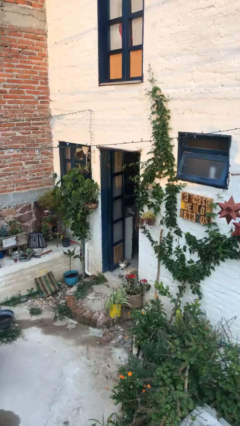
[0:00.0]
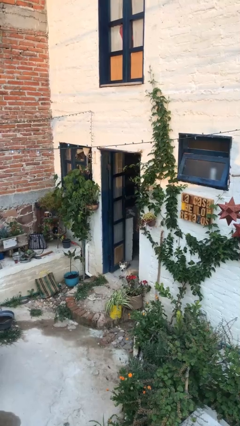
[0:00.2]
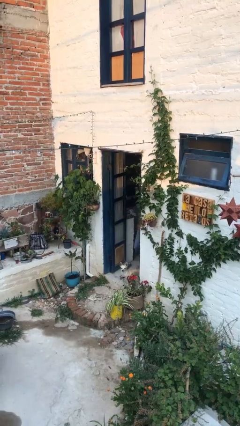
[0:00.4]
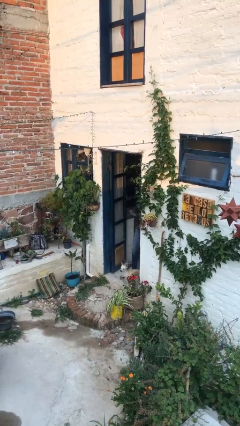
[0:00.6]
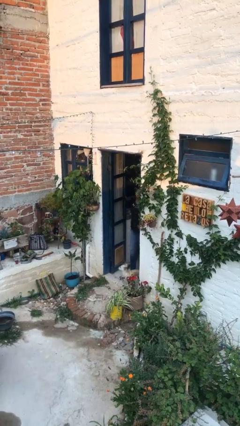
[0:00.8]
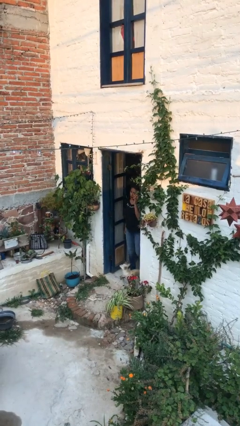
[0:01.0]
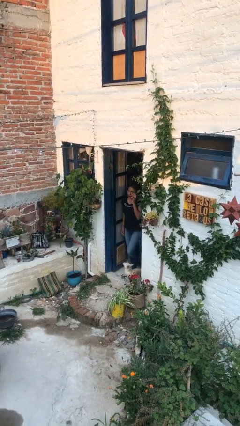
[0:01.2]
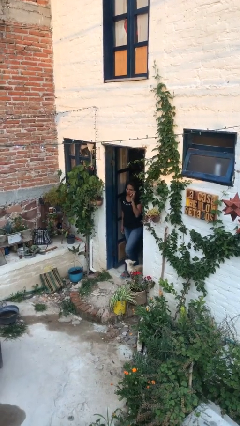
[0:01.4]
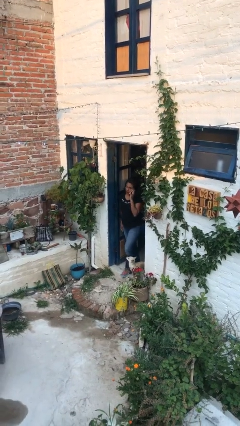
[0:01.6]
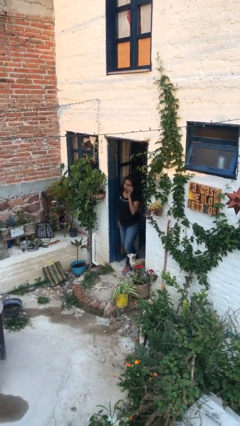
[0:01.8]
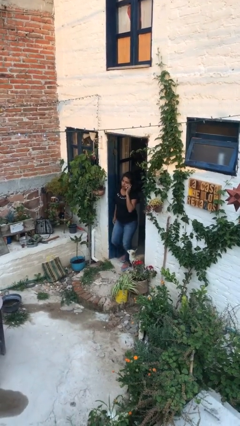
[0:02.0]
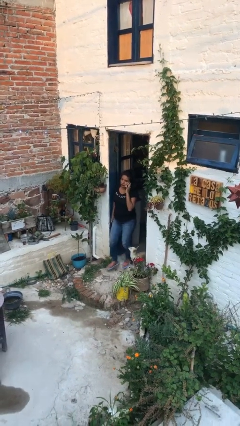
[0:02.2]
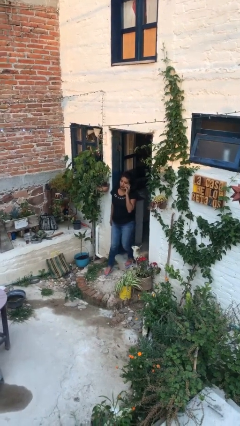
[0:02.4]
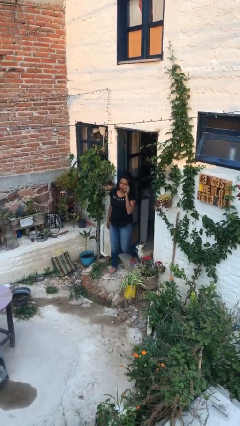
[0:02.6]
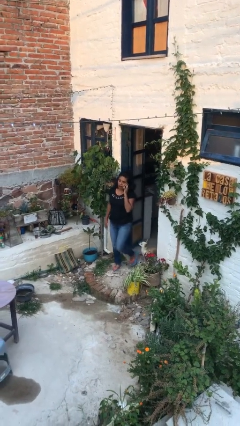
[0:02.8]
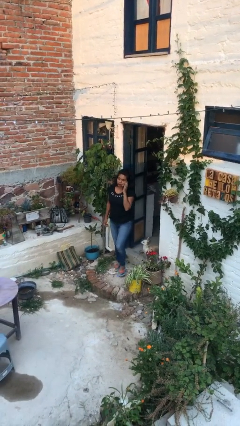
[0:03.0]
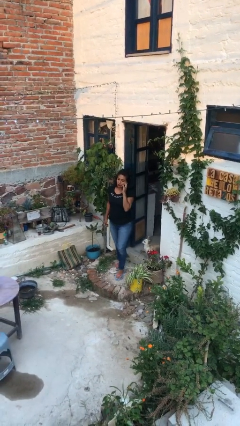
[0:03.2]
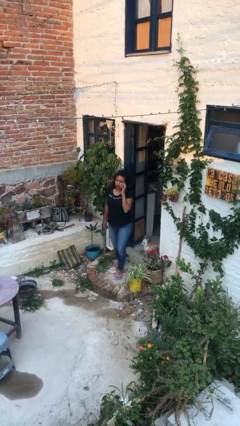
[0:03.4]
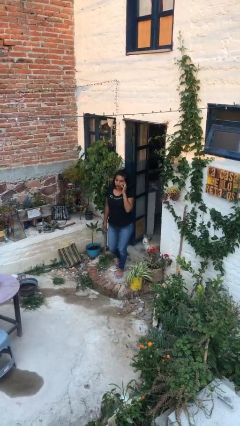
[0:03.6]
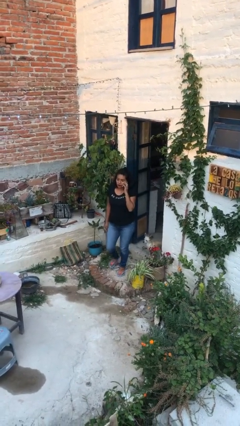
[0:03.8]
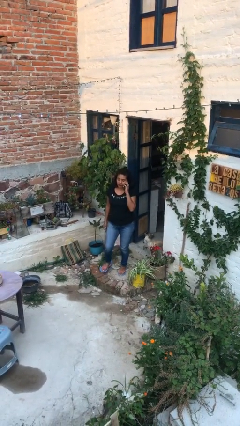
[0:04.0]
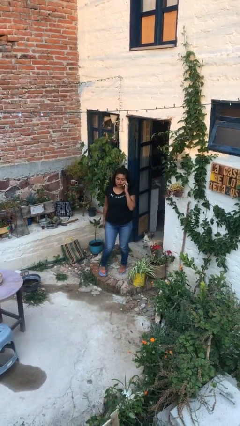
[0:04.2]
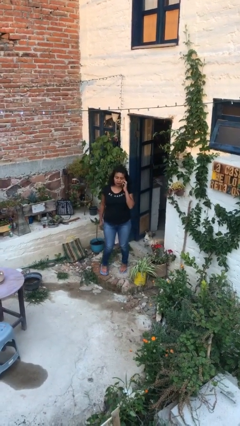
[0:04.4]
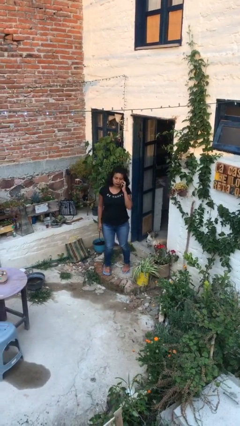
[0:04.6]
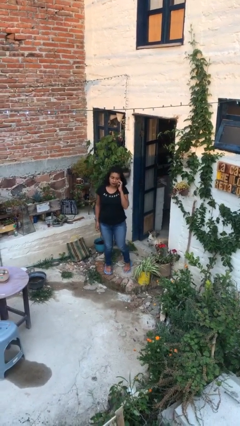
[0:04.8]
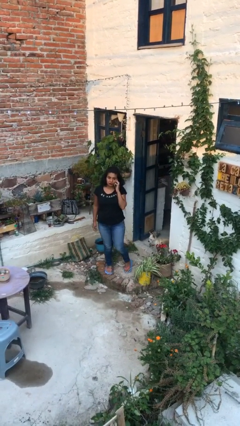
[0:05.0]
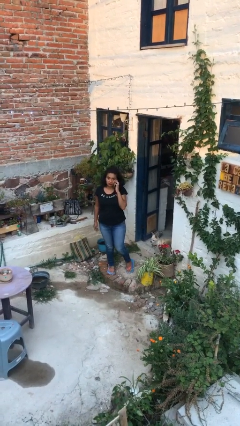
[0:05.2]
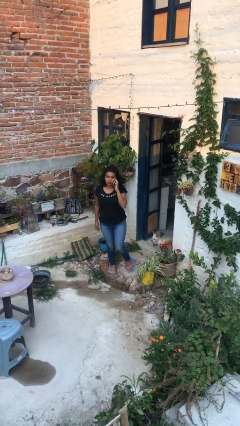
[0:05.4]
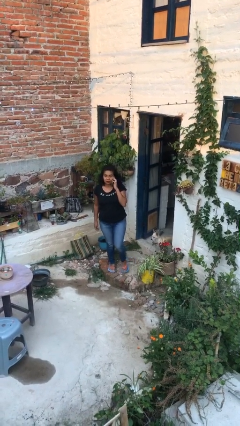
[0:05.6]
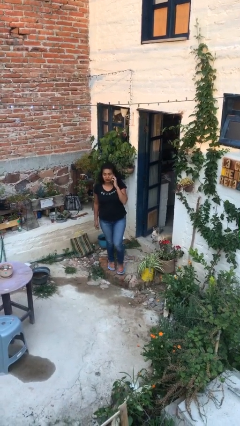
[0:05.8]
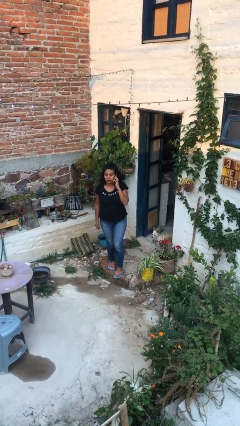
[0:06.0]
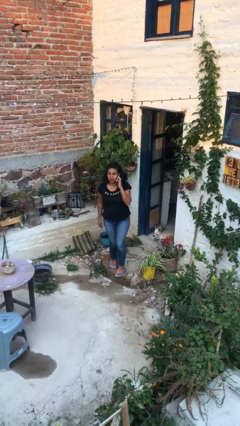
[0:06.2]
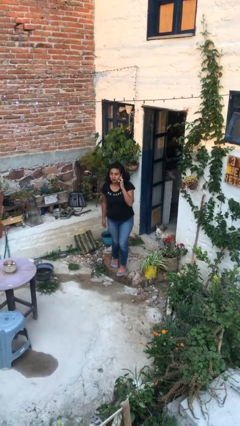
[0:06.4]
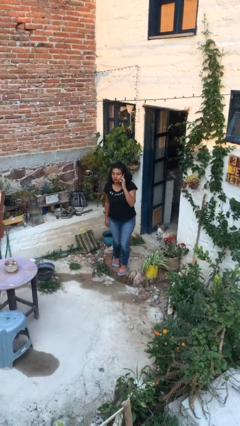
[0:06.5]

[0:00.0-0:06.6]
person enters scene through structure

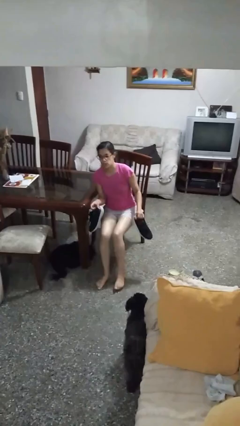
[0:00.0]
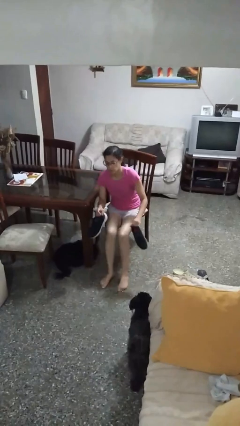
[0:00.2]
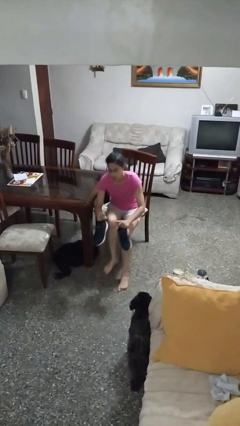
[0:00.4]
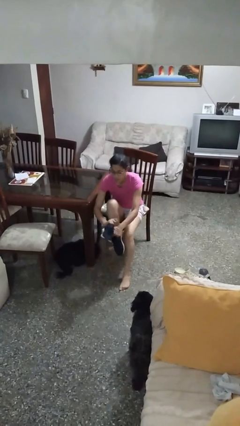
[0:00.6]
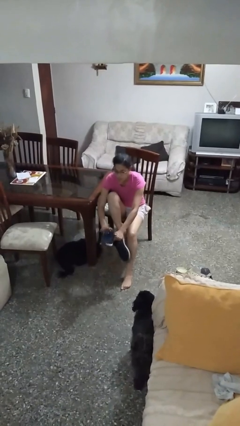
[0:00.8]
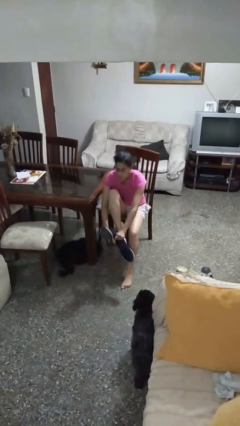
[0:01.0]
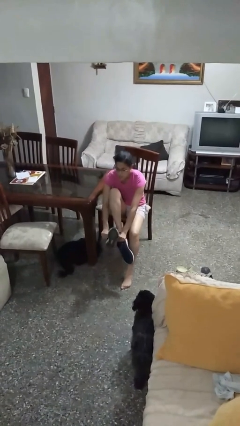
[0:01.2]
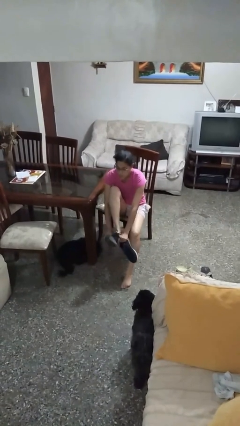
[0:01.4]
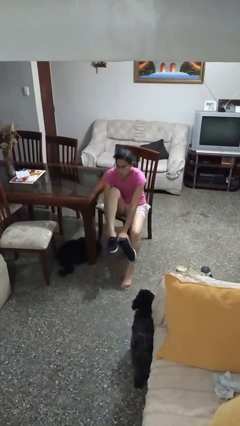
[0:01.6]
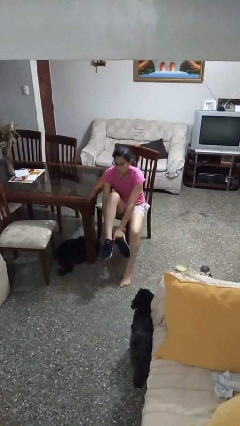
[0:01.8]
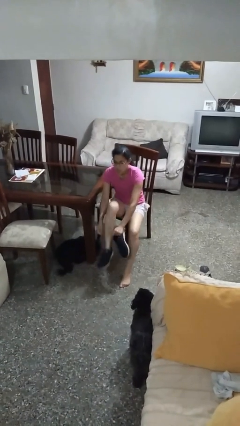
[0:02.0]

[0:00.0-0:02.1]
person puts on shoes

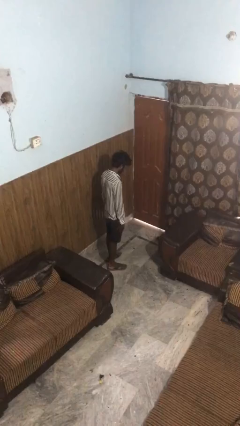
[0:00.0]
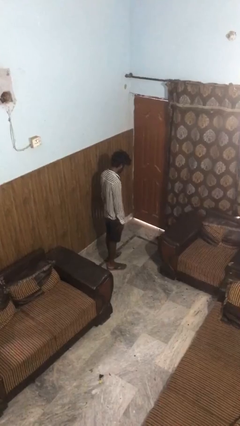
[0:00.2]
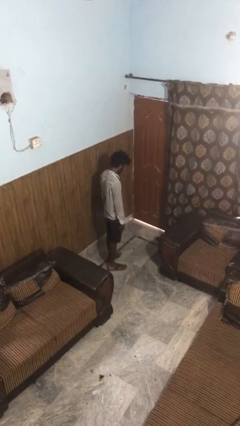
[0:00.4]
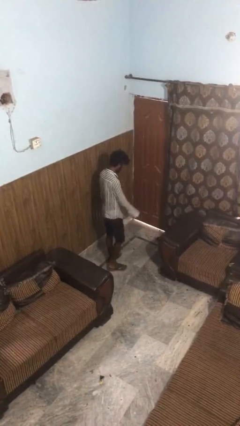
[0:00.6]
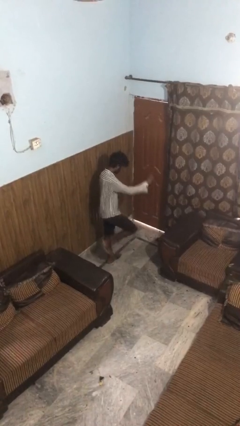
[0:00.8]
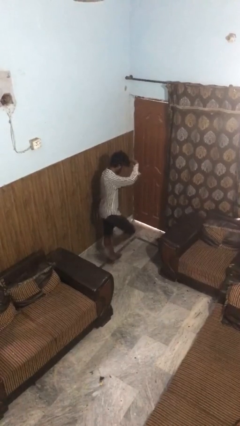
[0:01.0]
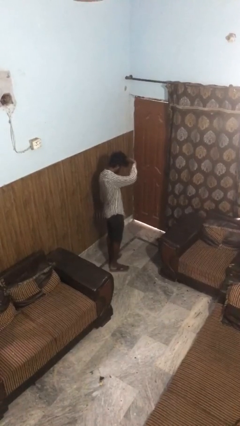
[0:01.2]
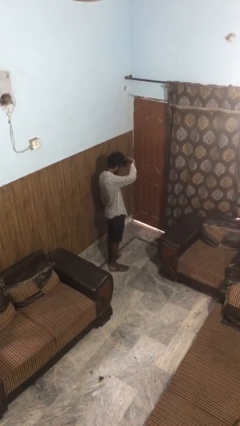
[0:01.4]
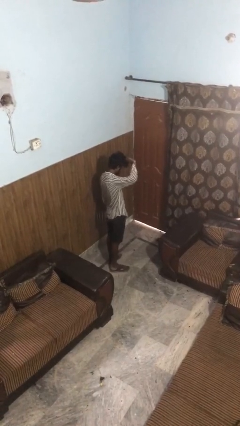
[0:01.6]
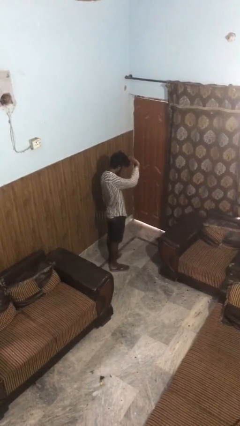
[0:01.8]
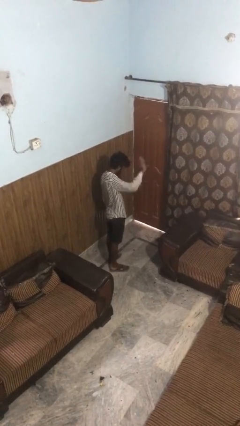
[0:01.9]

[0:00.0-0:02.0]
person salutes

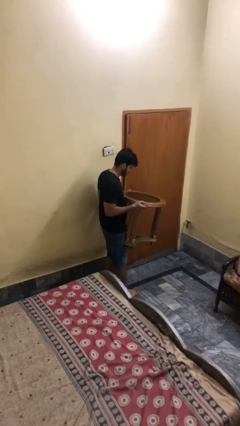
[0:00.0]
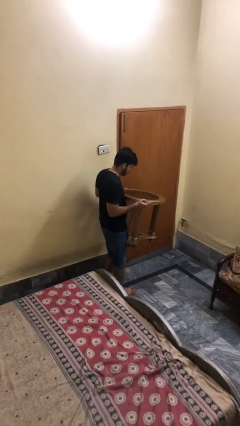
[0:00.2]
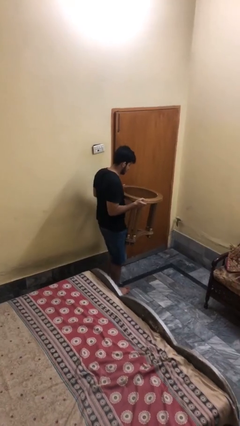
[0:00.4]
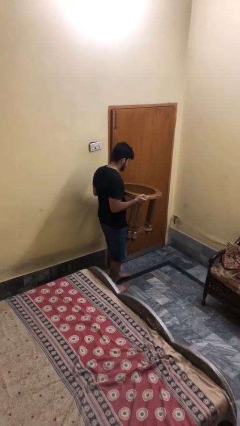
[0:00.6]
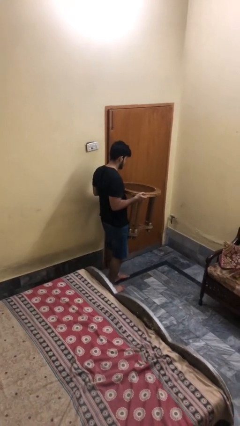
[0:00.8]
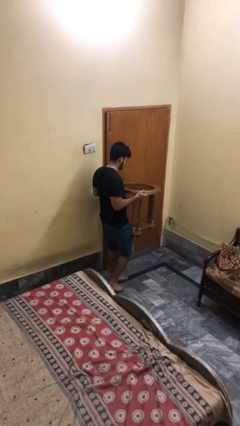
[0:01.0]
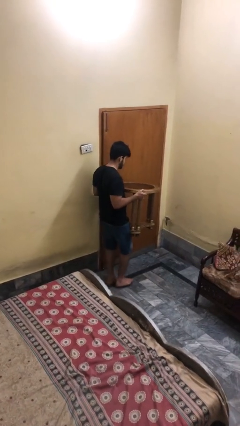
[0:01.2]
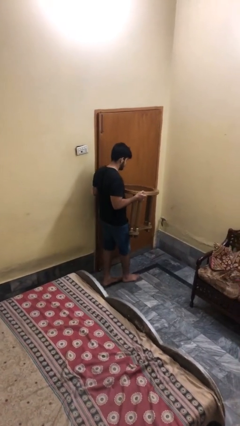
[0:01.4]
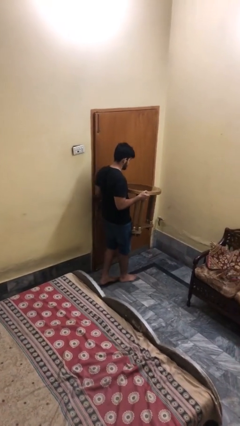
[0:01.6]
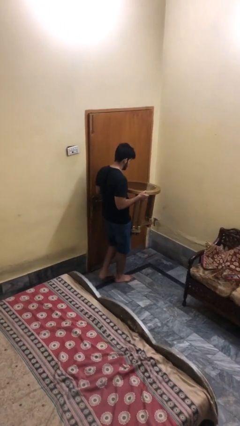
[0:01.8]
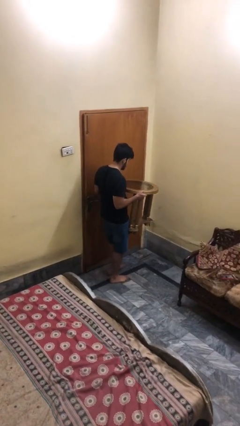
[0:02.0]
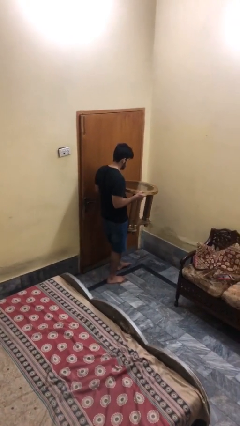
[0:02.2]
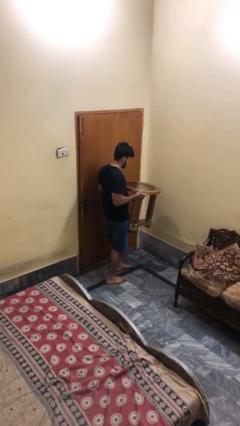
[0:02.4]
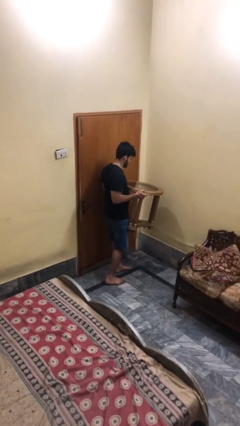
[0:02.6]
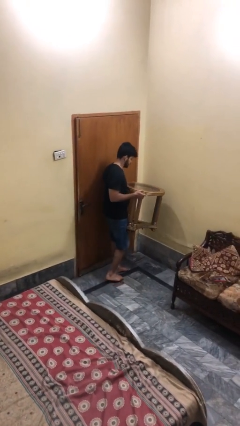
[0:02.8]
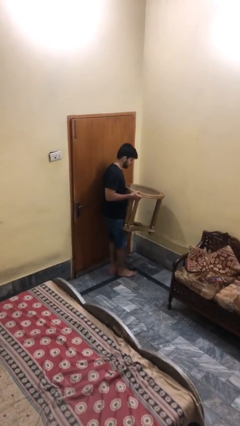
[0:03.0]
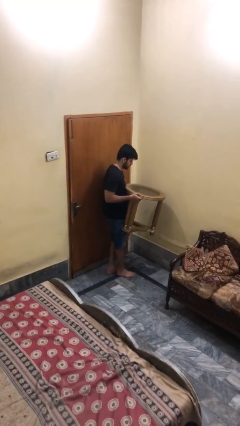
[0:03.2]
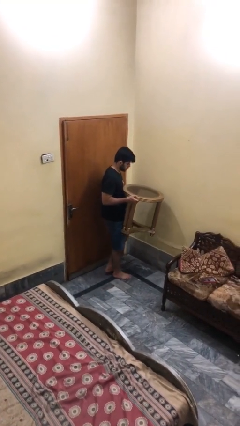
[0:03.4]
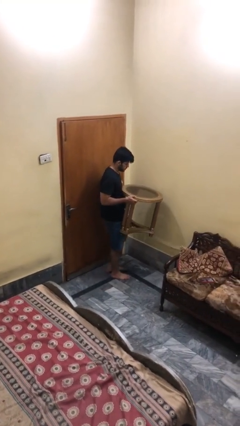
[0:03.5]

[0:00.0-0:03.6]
person carries furniture

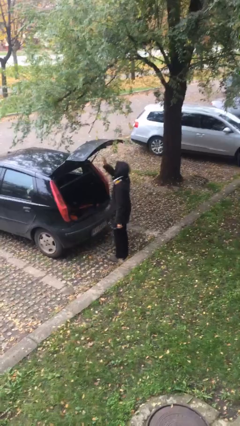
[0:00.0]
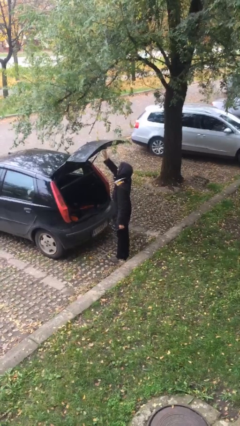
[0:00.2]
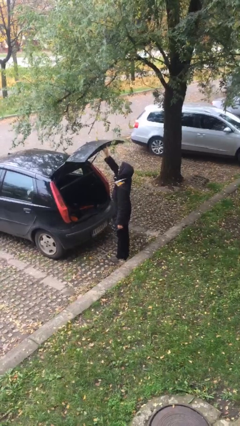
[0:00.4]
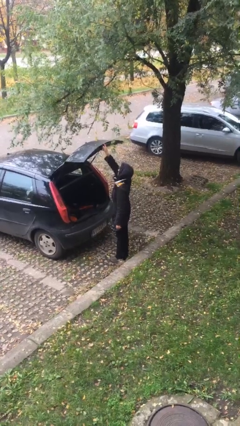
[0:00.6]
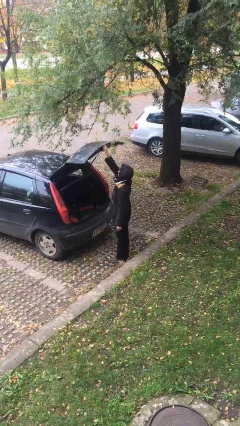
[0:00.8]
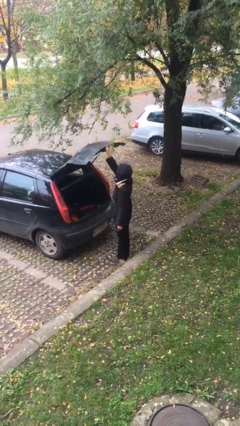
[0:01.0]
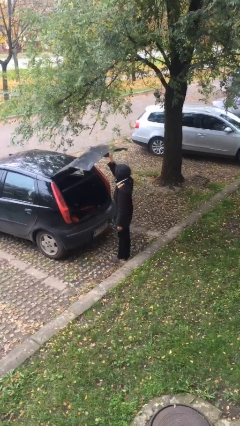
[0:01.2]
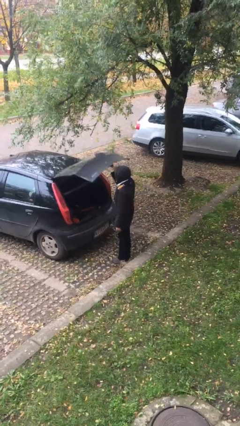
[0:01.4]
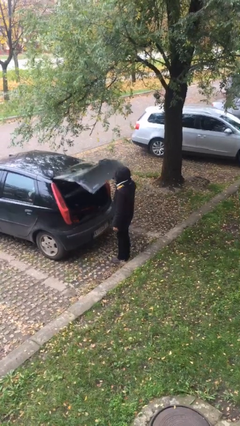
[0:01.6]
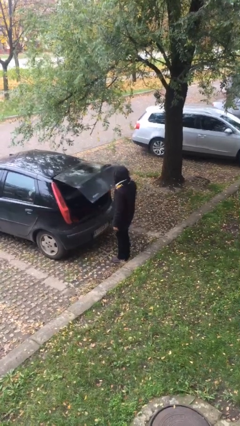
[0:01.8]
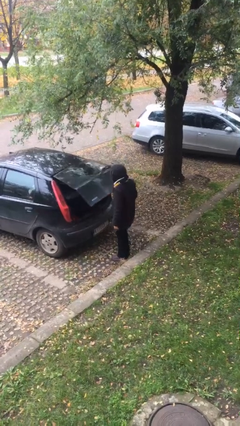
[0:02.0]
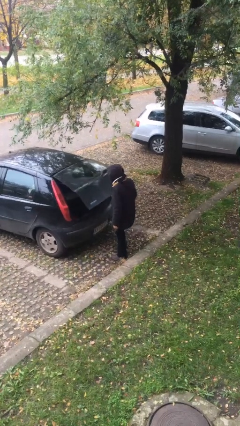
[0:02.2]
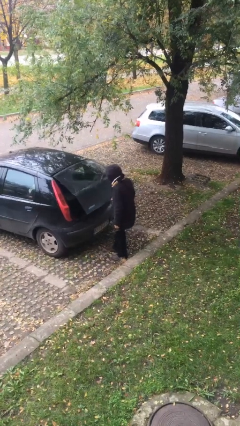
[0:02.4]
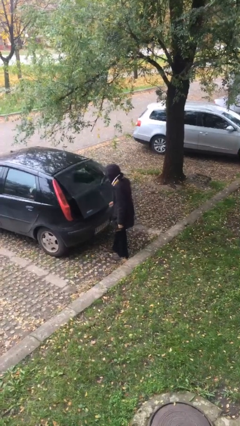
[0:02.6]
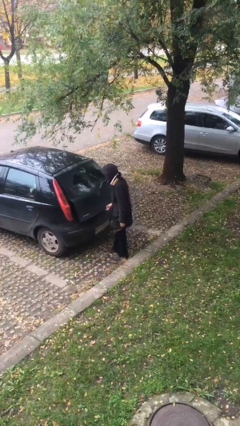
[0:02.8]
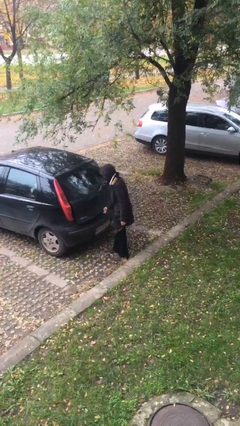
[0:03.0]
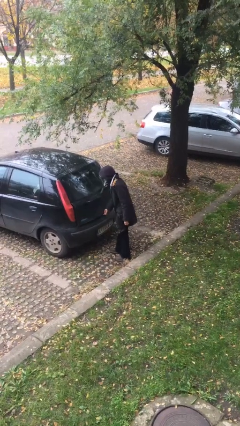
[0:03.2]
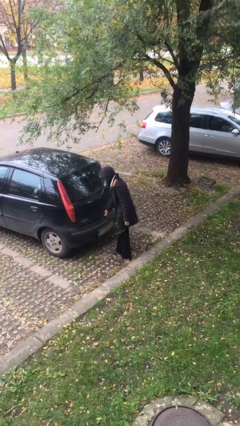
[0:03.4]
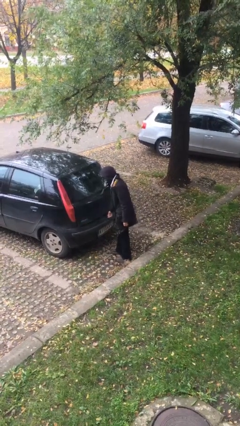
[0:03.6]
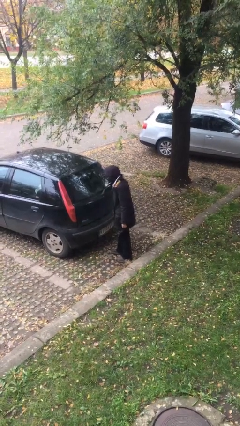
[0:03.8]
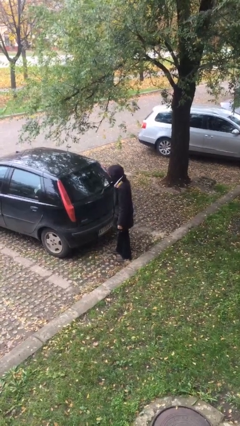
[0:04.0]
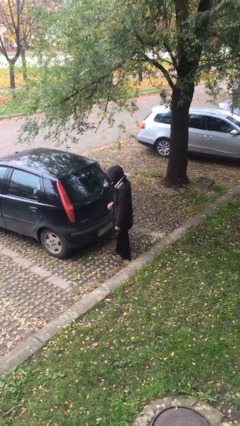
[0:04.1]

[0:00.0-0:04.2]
person closes car trunk
